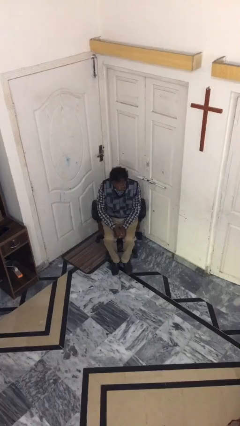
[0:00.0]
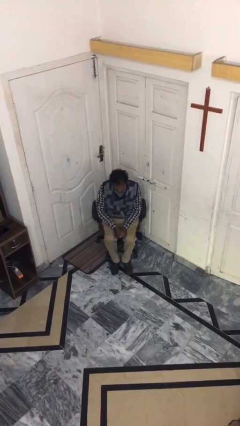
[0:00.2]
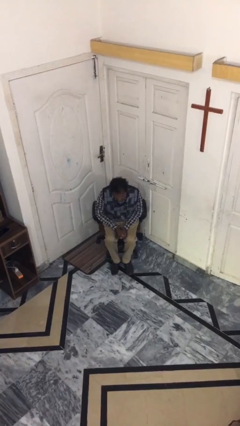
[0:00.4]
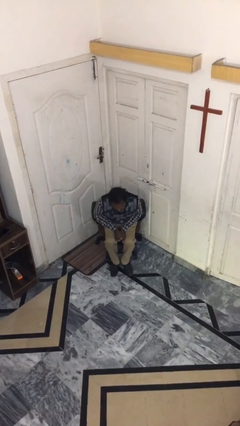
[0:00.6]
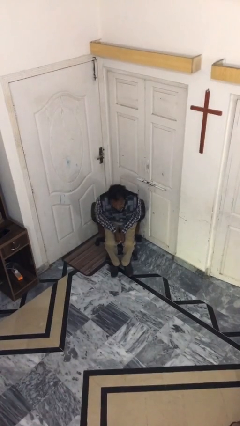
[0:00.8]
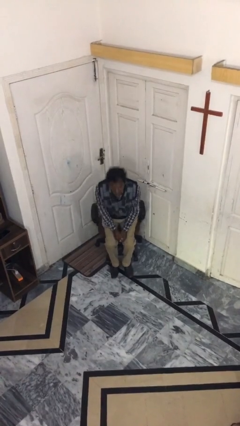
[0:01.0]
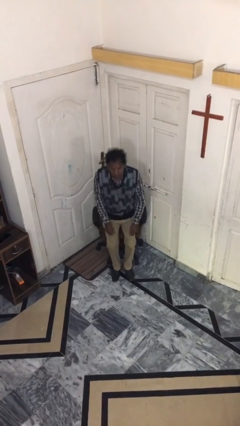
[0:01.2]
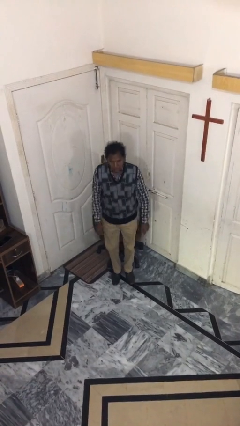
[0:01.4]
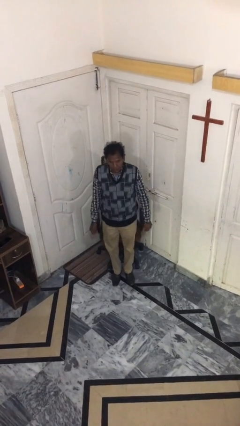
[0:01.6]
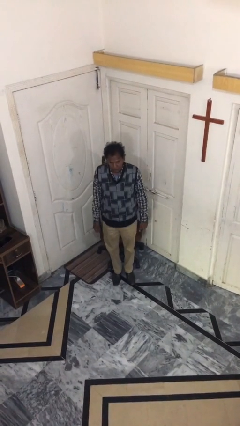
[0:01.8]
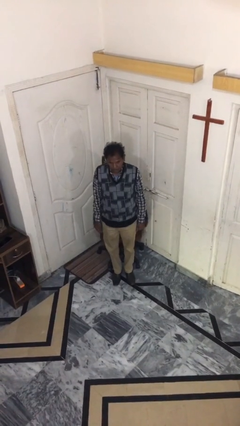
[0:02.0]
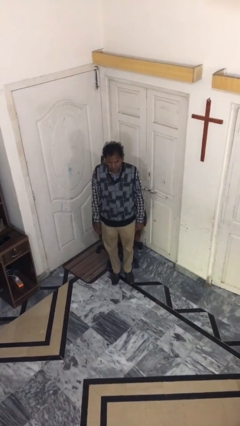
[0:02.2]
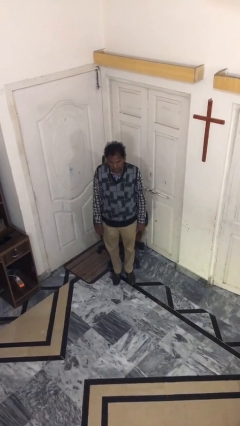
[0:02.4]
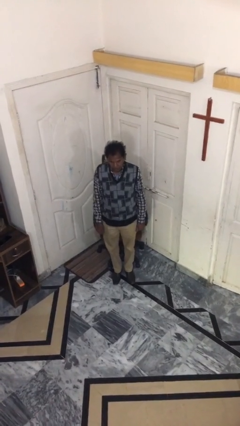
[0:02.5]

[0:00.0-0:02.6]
person stands up

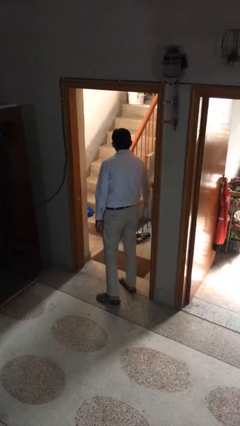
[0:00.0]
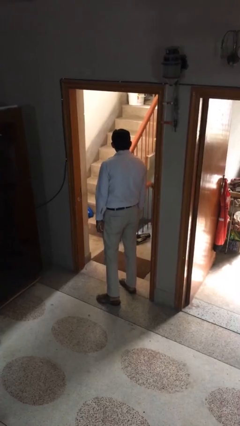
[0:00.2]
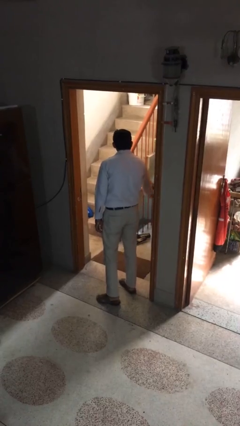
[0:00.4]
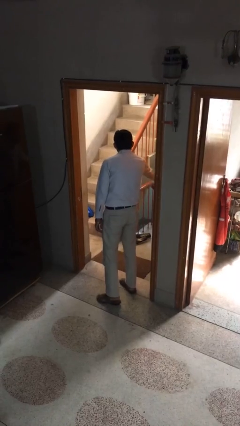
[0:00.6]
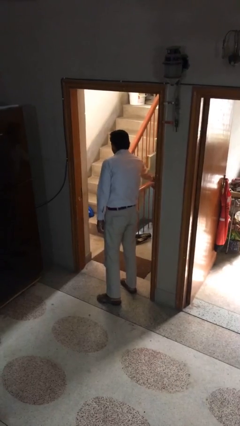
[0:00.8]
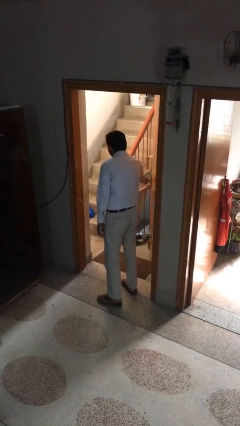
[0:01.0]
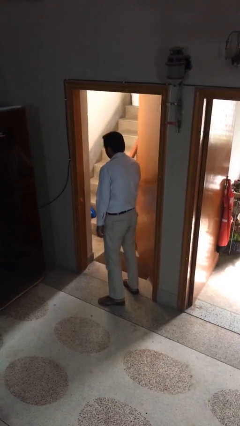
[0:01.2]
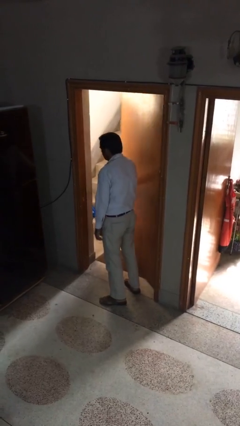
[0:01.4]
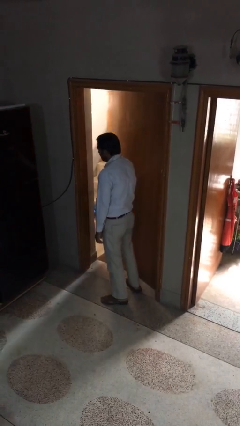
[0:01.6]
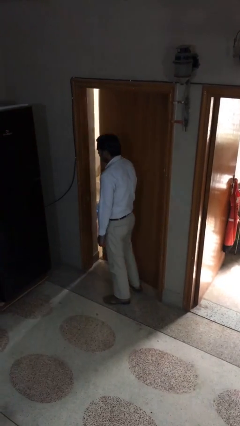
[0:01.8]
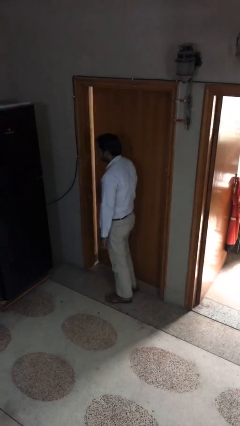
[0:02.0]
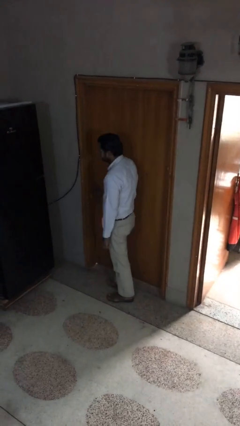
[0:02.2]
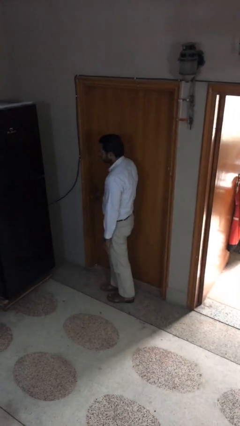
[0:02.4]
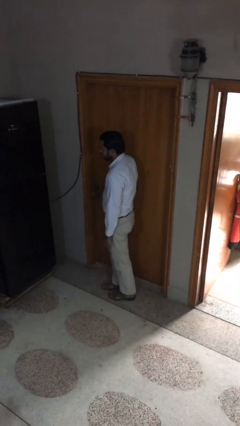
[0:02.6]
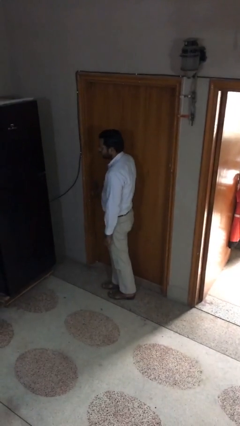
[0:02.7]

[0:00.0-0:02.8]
person closes facility door

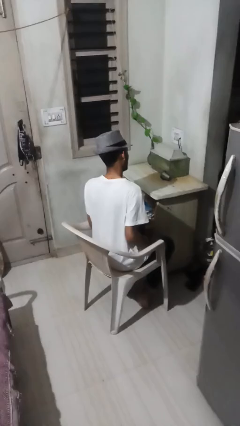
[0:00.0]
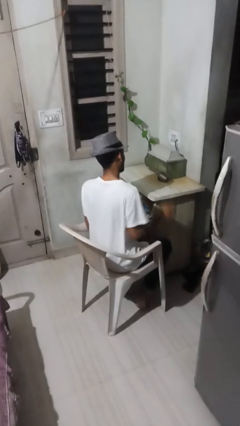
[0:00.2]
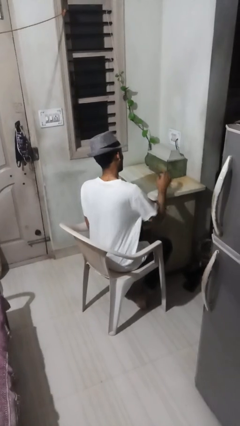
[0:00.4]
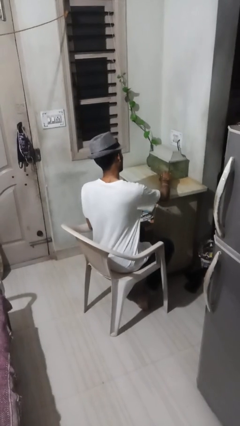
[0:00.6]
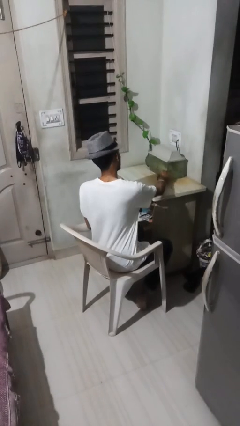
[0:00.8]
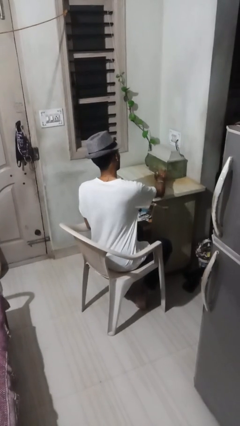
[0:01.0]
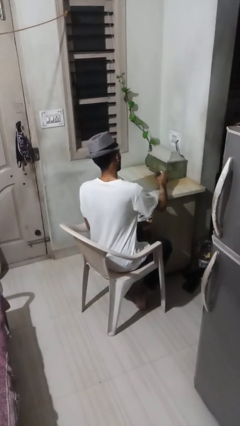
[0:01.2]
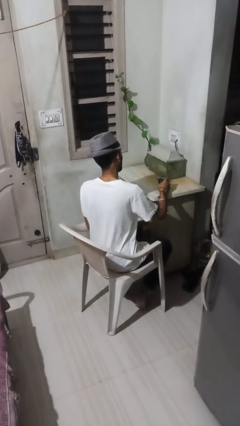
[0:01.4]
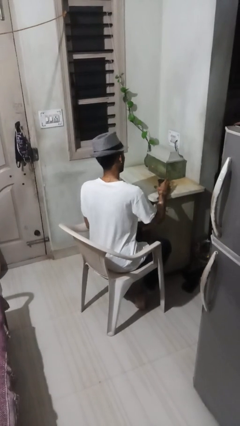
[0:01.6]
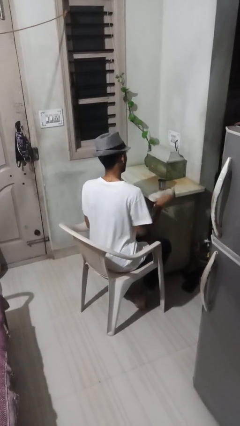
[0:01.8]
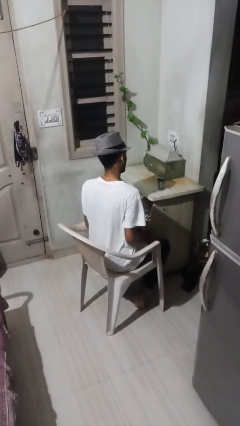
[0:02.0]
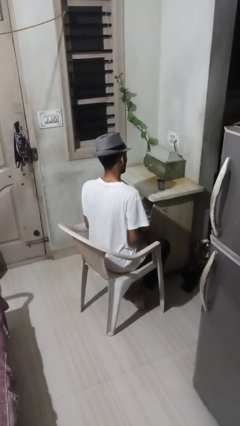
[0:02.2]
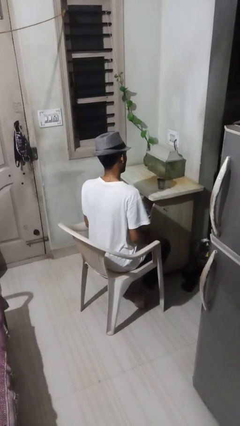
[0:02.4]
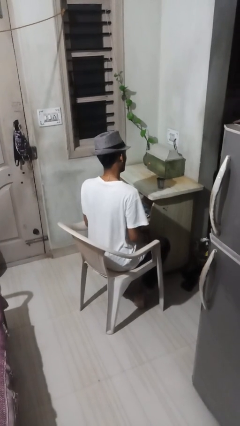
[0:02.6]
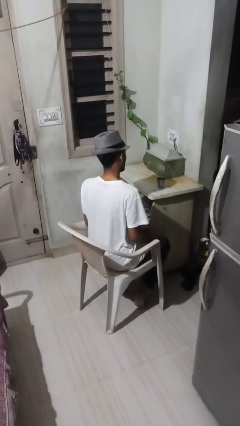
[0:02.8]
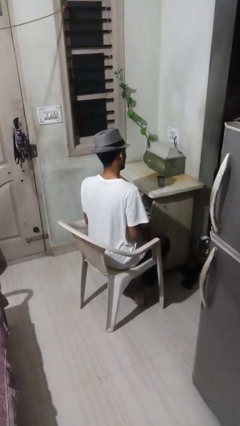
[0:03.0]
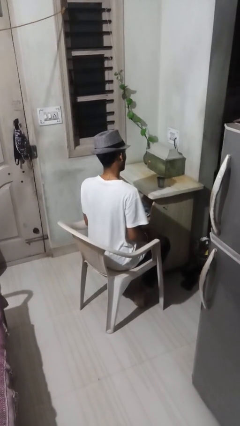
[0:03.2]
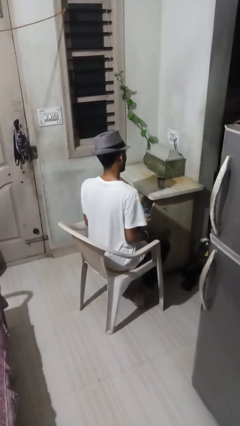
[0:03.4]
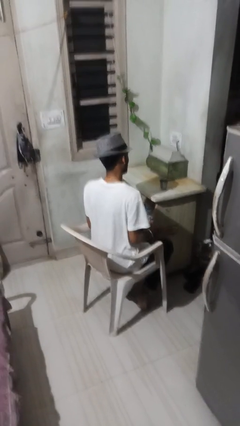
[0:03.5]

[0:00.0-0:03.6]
person sets upright glass

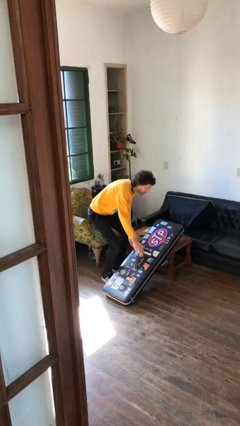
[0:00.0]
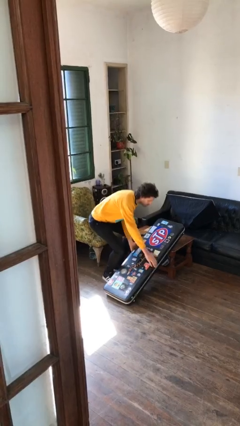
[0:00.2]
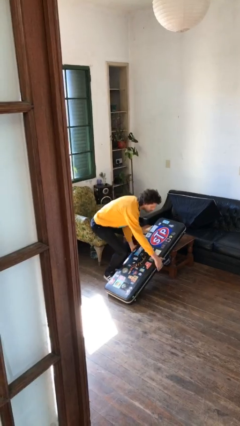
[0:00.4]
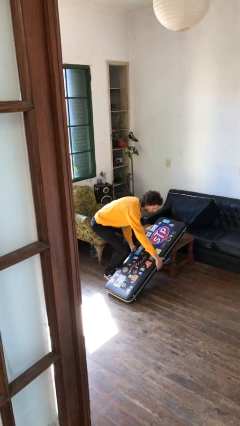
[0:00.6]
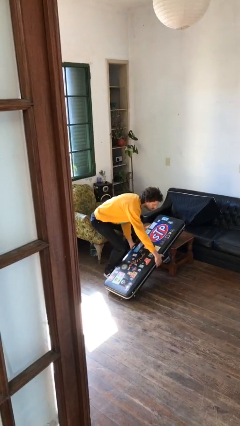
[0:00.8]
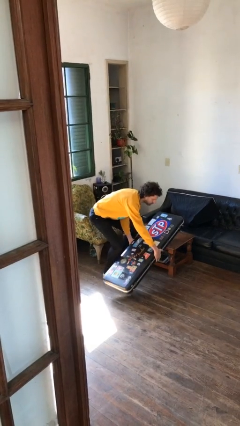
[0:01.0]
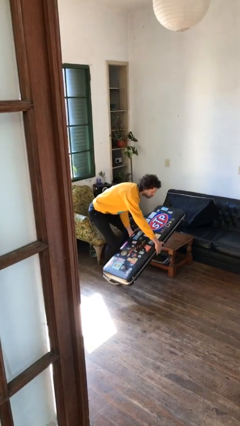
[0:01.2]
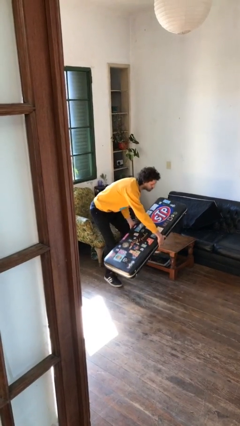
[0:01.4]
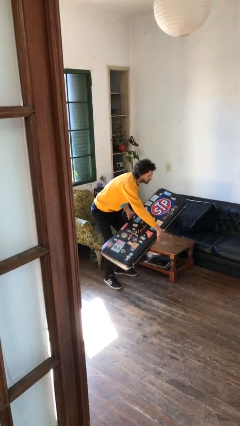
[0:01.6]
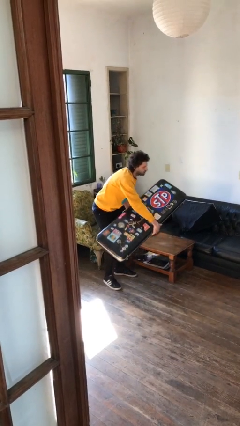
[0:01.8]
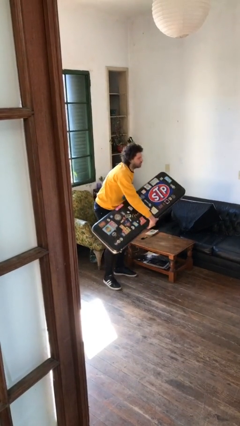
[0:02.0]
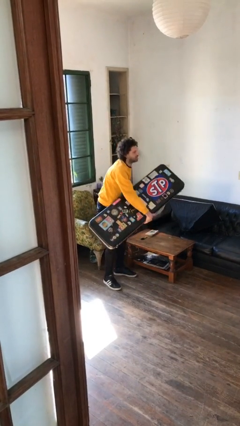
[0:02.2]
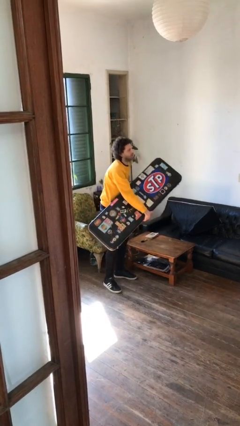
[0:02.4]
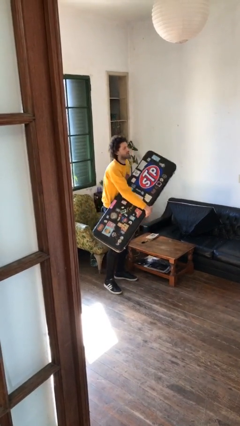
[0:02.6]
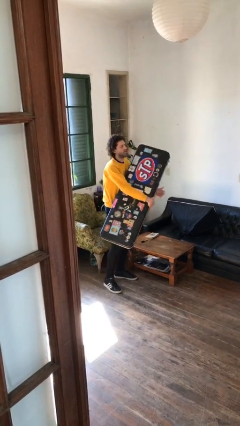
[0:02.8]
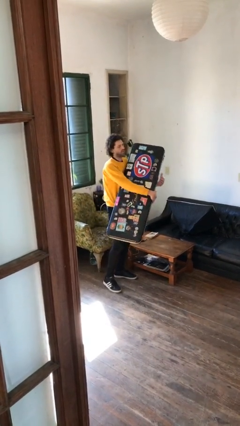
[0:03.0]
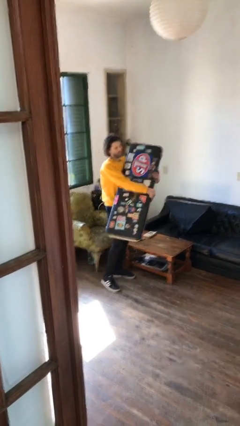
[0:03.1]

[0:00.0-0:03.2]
person picks up object from floor

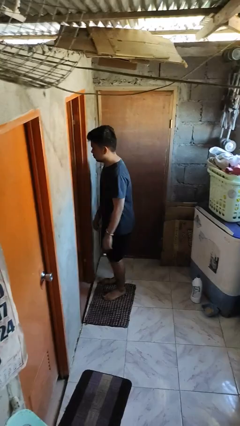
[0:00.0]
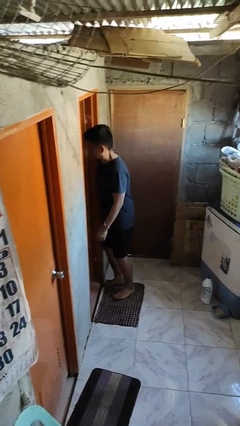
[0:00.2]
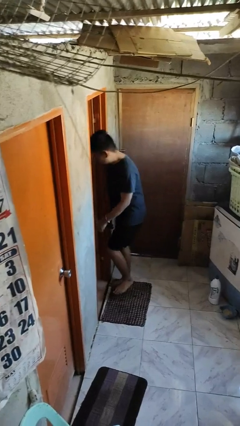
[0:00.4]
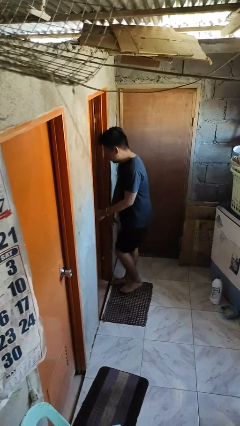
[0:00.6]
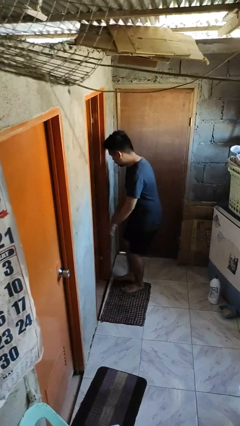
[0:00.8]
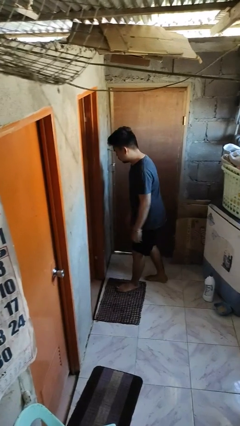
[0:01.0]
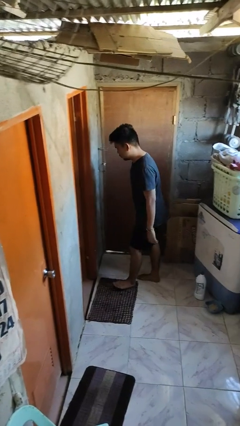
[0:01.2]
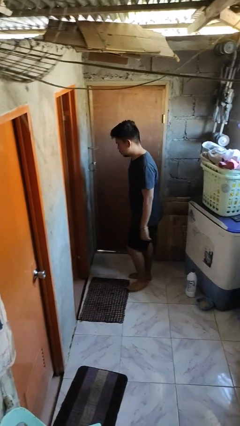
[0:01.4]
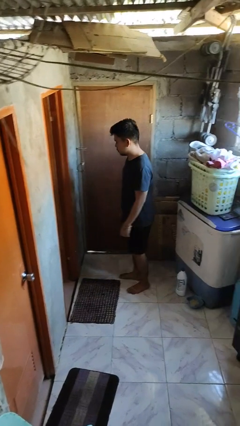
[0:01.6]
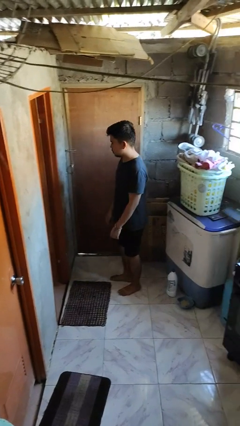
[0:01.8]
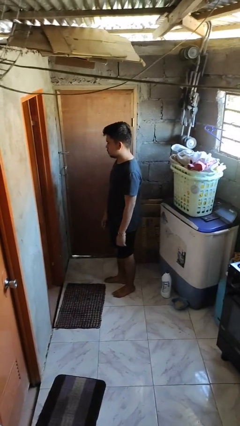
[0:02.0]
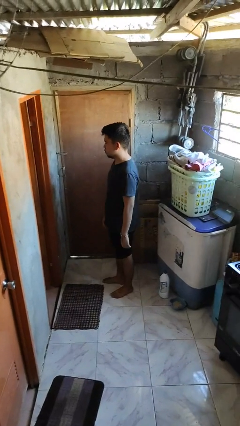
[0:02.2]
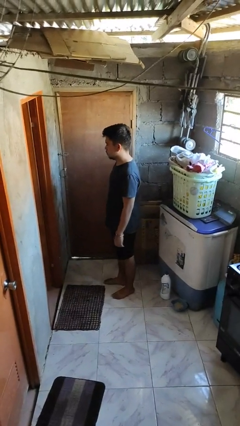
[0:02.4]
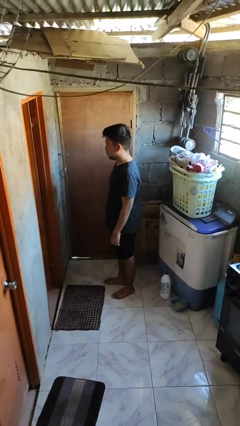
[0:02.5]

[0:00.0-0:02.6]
person bumps into wall

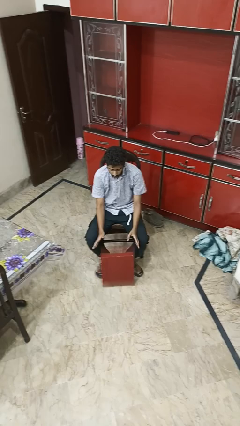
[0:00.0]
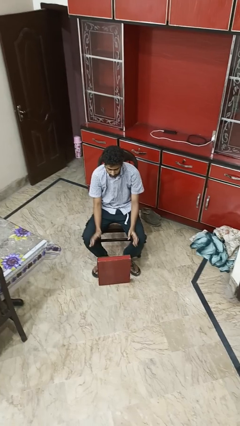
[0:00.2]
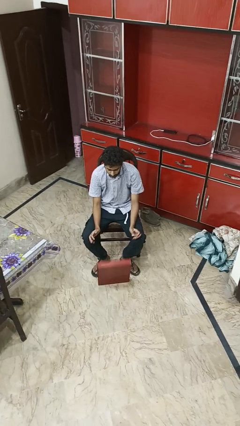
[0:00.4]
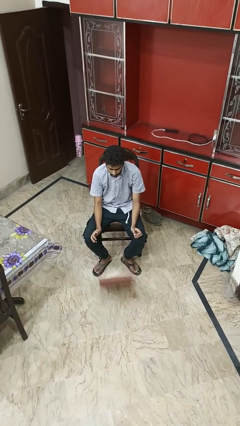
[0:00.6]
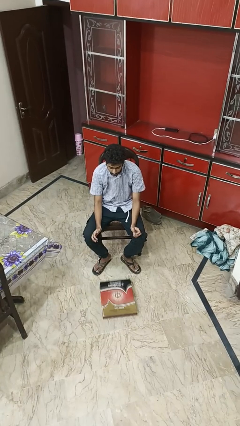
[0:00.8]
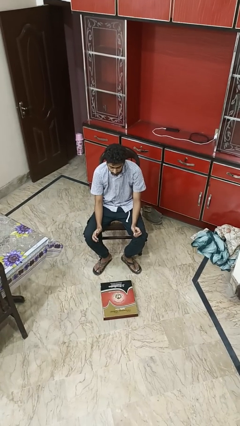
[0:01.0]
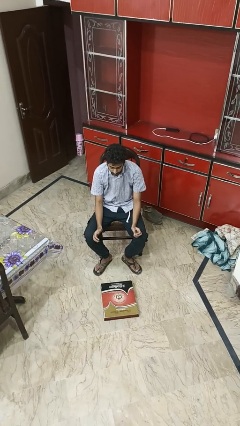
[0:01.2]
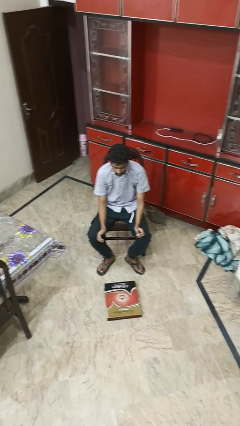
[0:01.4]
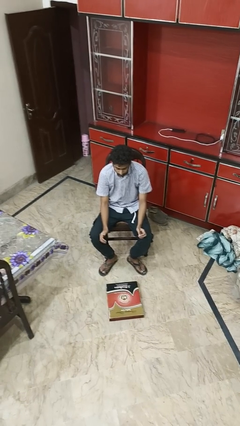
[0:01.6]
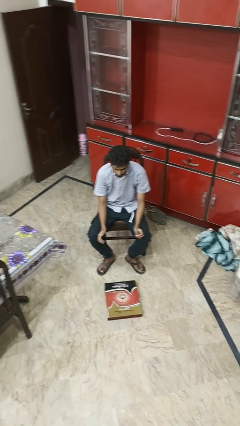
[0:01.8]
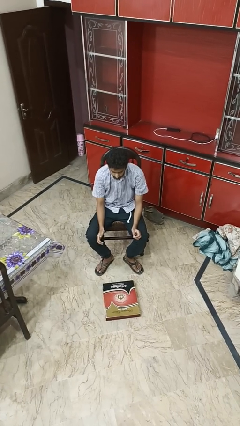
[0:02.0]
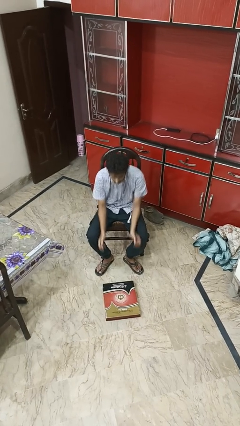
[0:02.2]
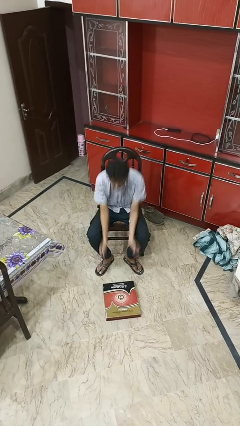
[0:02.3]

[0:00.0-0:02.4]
person drops object

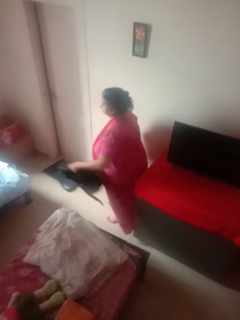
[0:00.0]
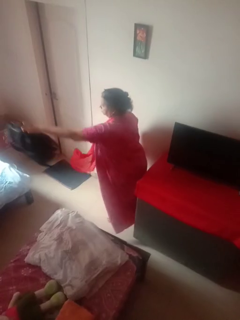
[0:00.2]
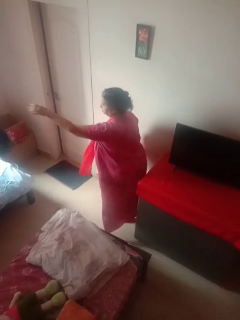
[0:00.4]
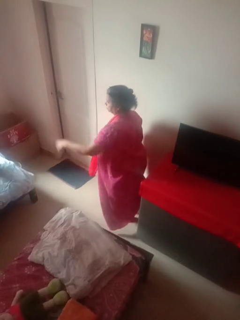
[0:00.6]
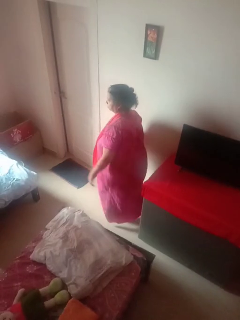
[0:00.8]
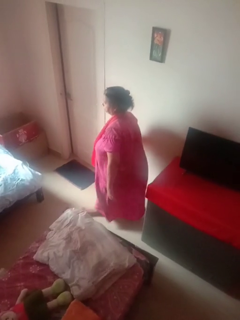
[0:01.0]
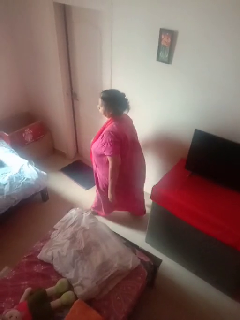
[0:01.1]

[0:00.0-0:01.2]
person throws object on bed
